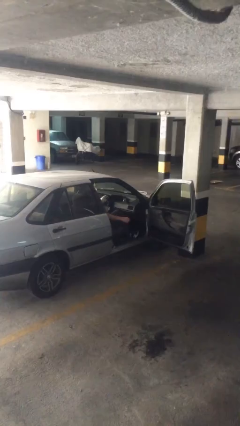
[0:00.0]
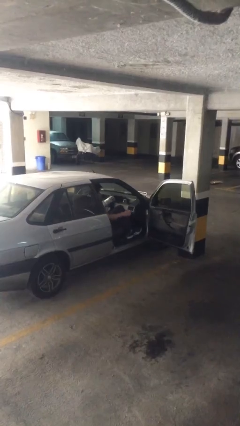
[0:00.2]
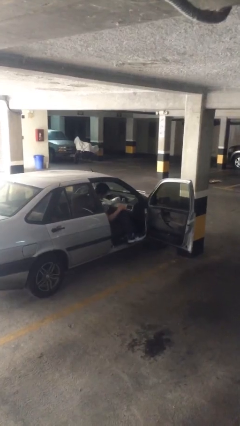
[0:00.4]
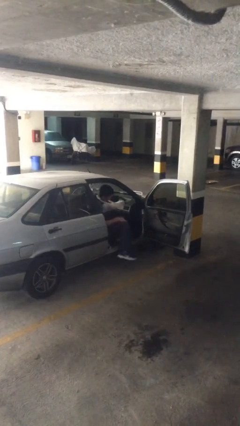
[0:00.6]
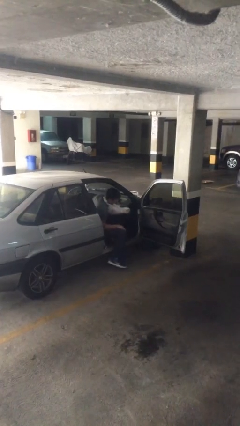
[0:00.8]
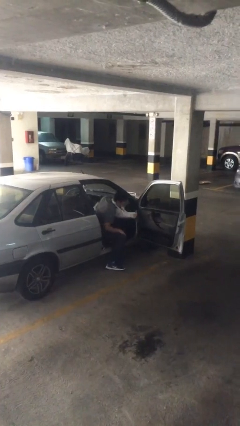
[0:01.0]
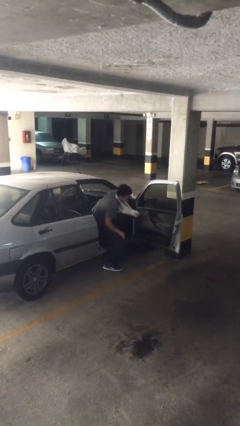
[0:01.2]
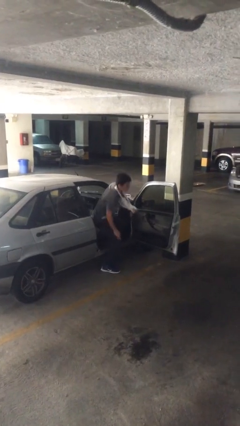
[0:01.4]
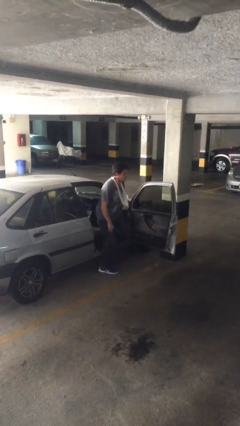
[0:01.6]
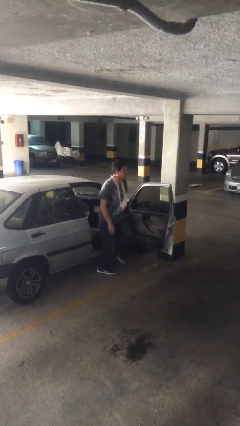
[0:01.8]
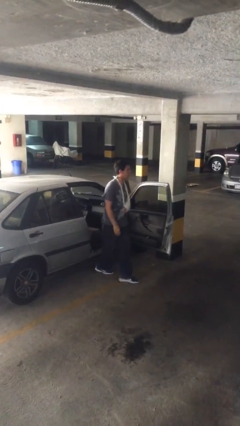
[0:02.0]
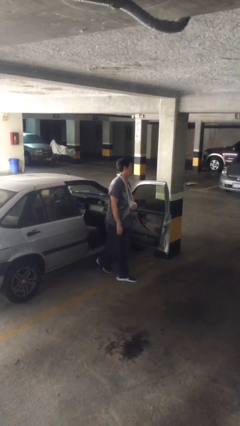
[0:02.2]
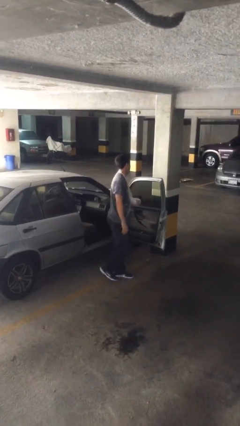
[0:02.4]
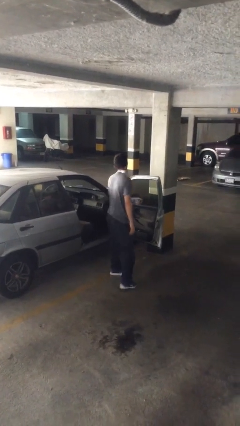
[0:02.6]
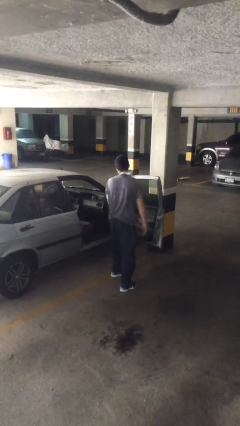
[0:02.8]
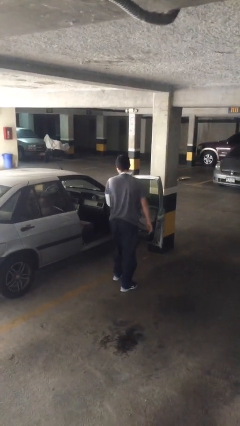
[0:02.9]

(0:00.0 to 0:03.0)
person exits car

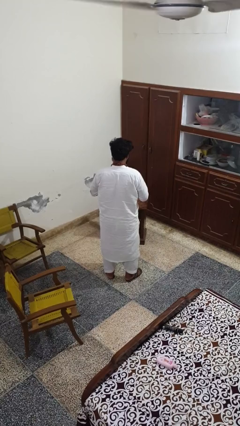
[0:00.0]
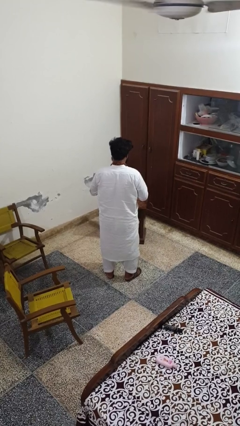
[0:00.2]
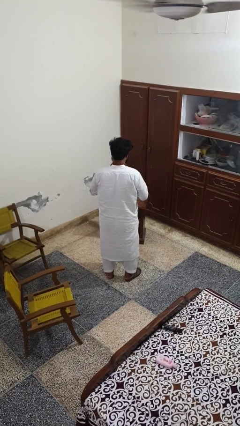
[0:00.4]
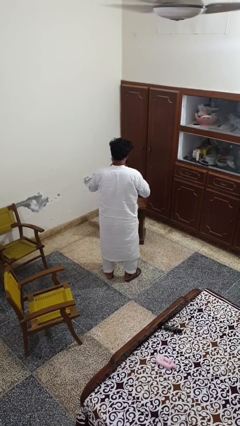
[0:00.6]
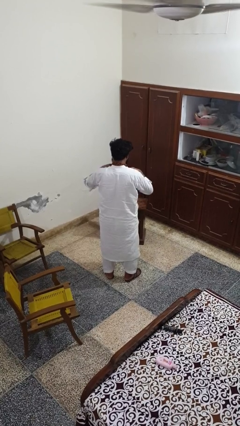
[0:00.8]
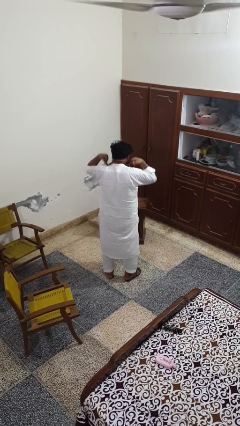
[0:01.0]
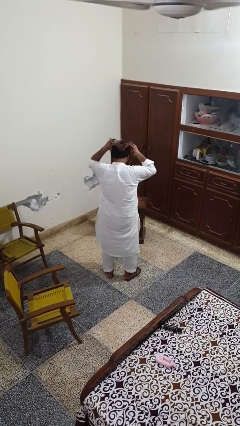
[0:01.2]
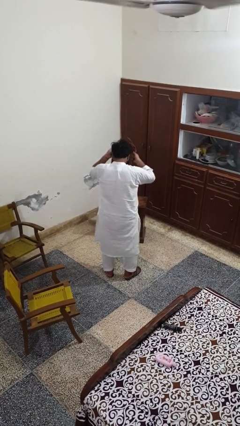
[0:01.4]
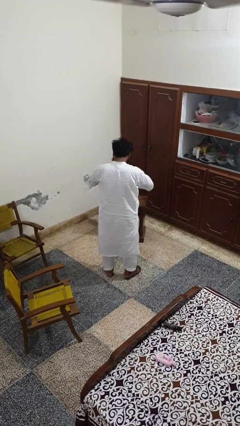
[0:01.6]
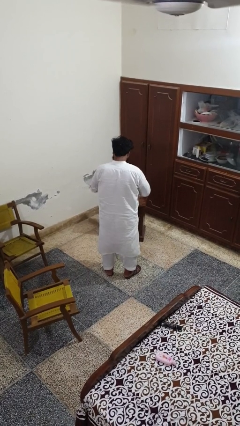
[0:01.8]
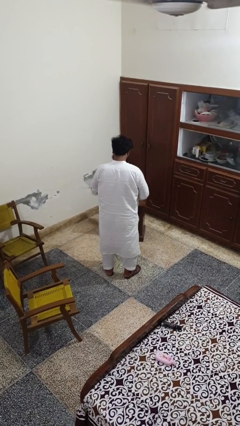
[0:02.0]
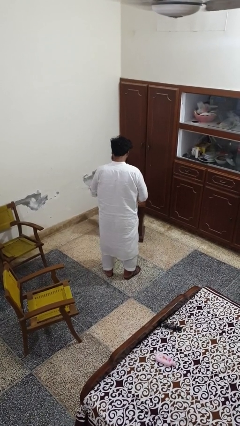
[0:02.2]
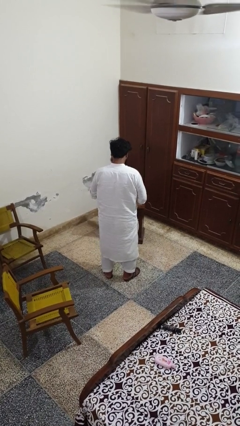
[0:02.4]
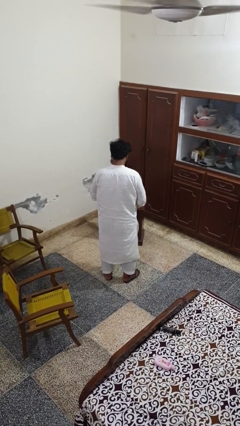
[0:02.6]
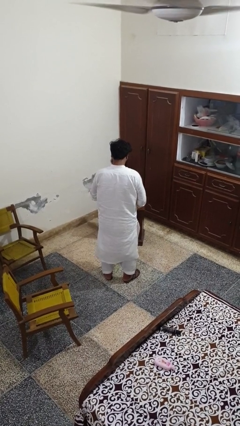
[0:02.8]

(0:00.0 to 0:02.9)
person takes off necklace

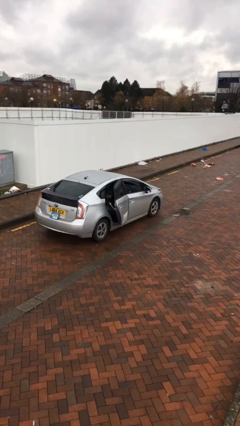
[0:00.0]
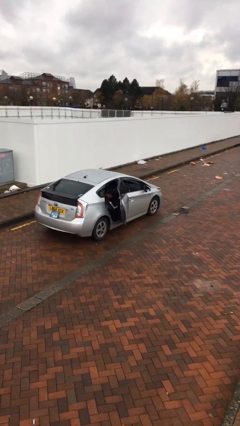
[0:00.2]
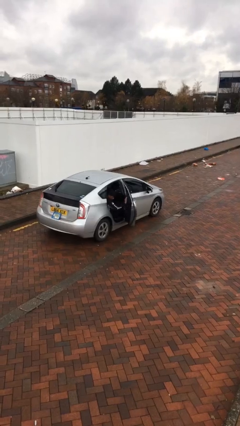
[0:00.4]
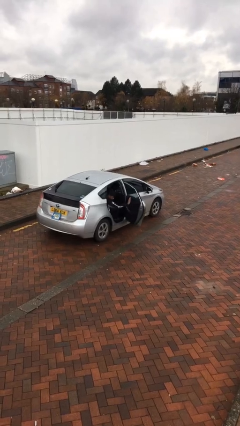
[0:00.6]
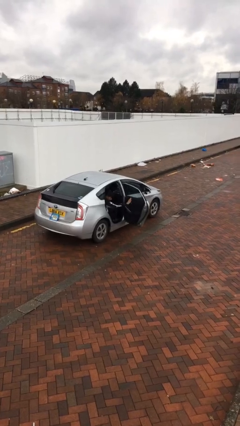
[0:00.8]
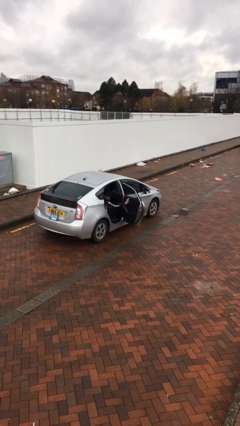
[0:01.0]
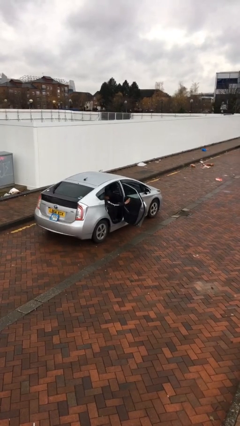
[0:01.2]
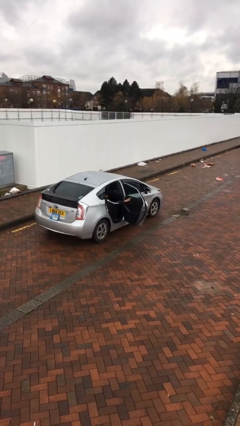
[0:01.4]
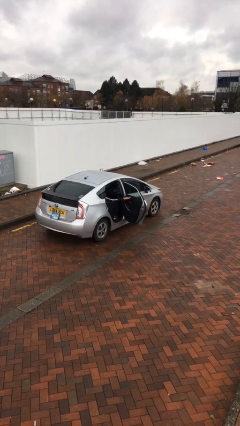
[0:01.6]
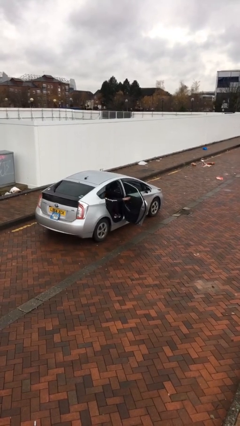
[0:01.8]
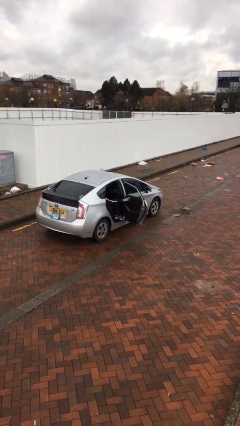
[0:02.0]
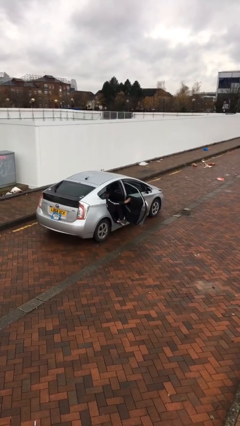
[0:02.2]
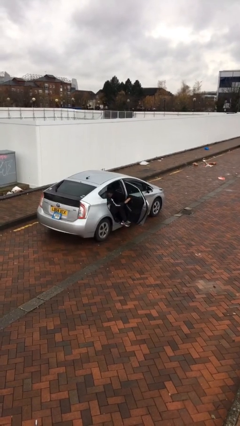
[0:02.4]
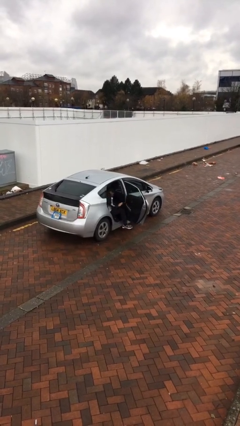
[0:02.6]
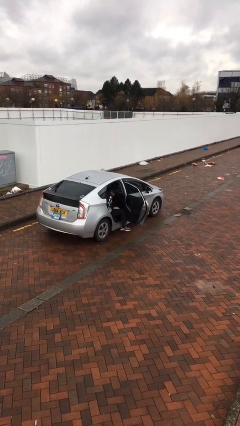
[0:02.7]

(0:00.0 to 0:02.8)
person opens car door

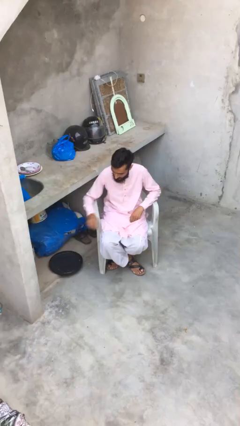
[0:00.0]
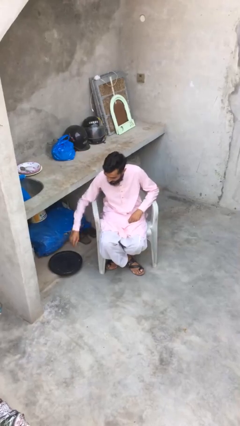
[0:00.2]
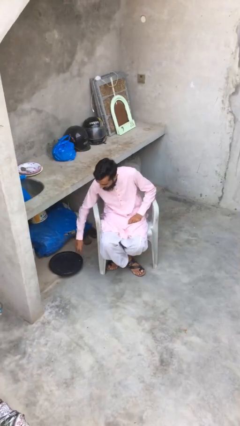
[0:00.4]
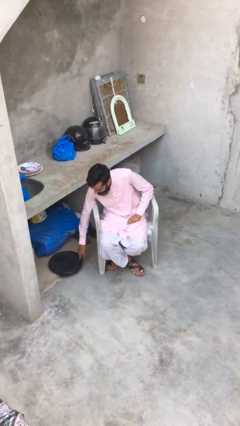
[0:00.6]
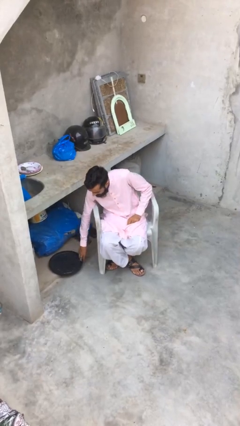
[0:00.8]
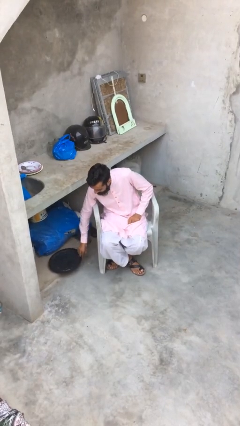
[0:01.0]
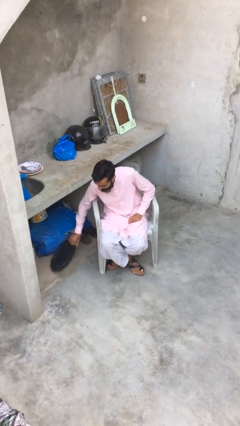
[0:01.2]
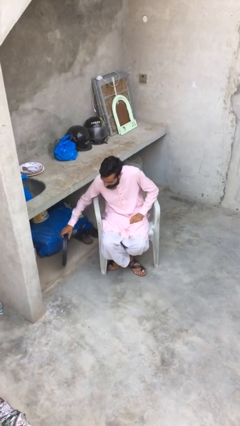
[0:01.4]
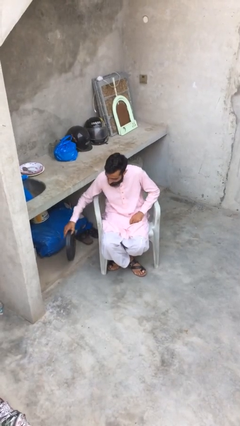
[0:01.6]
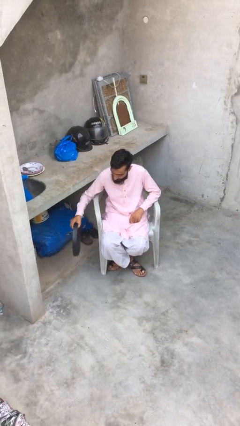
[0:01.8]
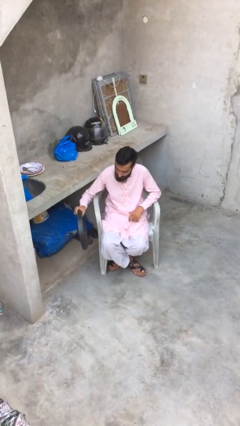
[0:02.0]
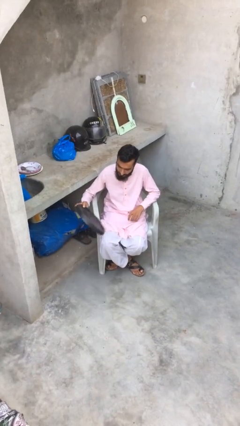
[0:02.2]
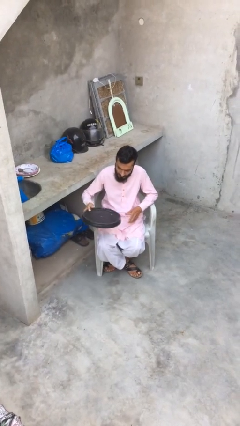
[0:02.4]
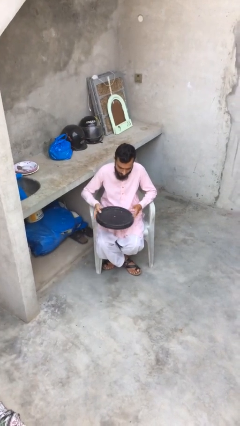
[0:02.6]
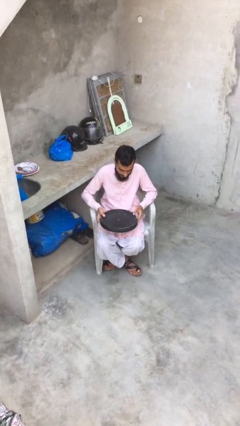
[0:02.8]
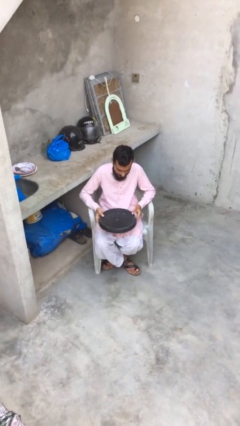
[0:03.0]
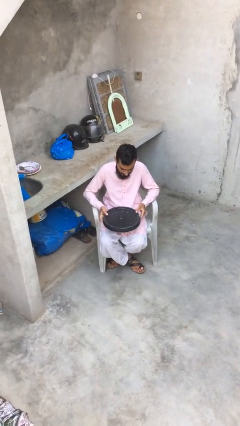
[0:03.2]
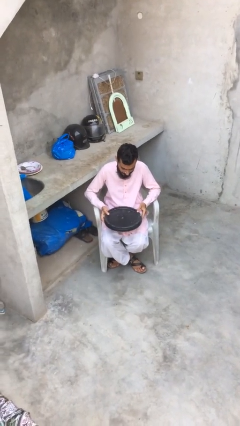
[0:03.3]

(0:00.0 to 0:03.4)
person picks up object from floor

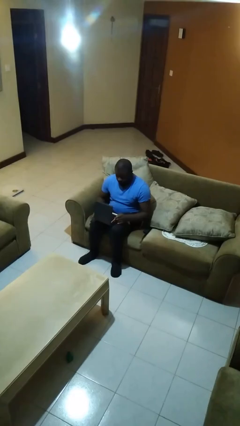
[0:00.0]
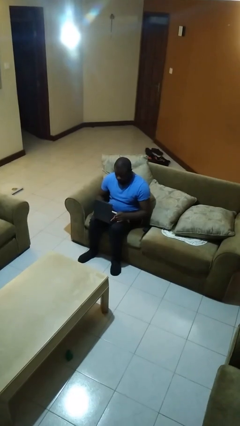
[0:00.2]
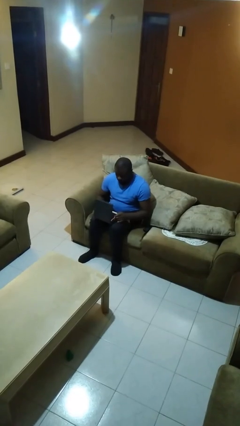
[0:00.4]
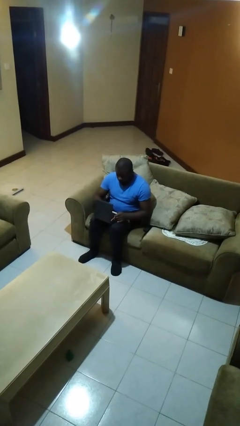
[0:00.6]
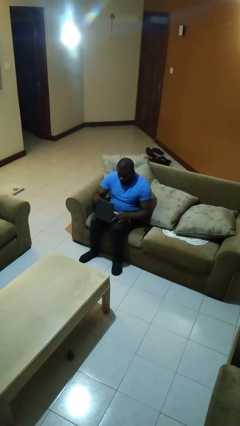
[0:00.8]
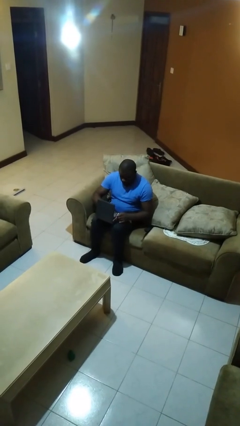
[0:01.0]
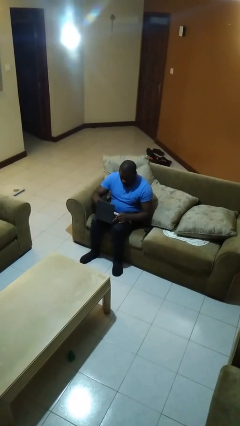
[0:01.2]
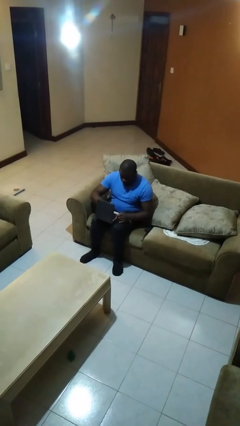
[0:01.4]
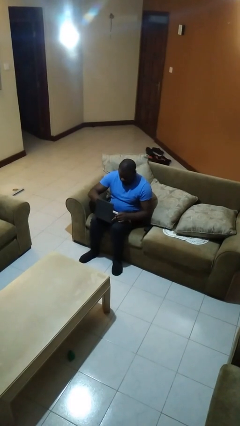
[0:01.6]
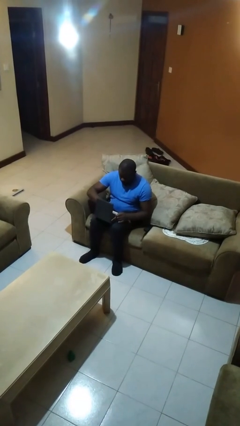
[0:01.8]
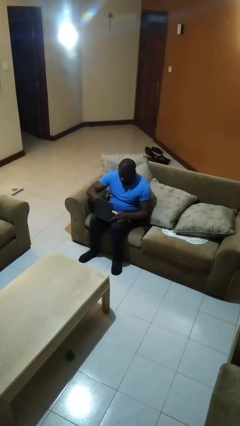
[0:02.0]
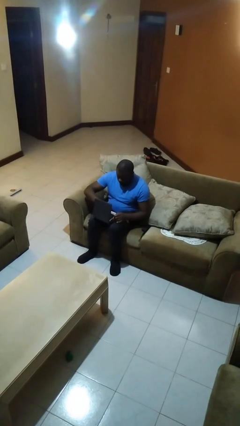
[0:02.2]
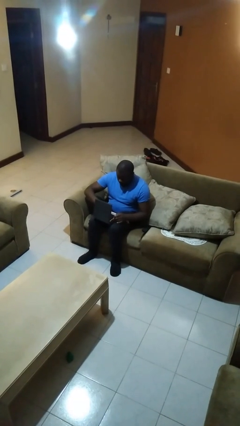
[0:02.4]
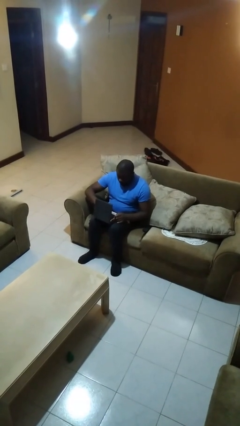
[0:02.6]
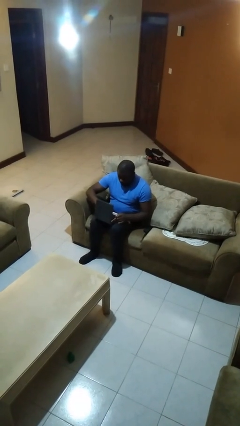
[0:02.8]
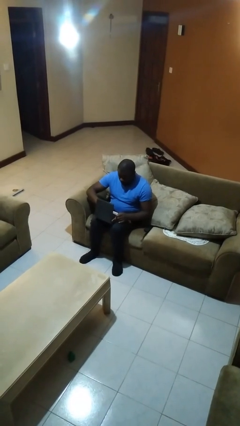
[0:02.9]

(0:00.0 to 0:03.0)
person searches jewelry box

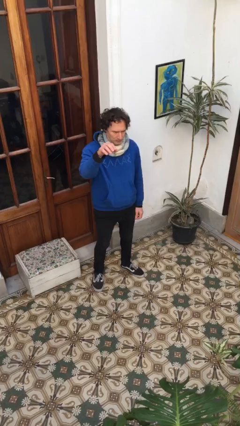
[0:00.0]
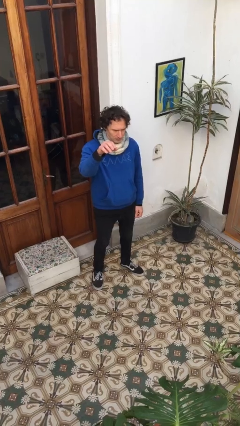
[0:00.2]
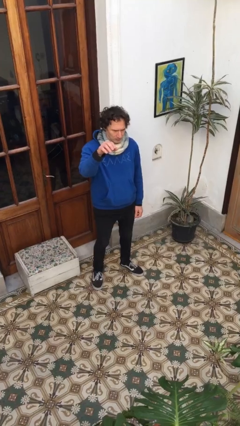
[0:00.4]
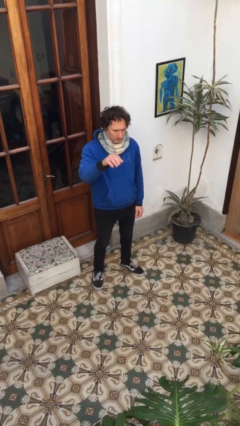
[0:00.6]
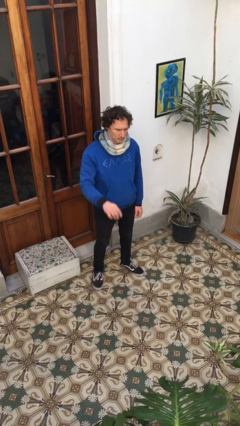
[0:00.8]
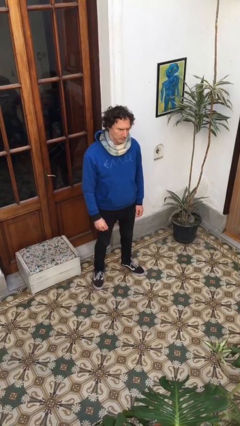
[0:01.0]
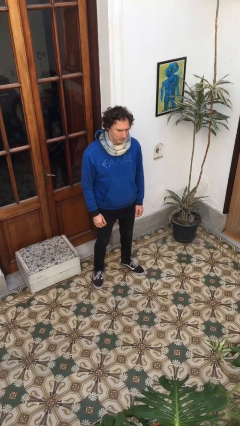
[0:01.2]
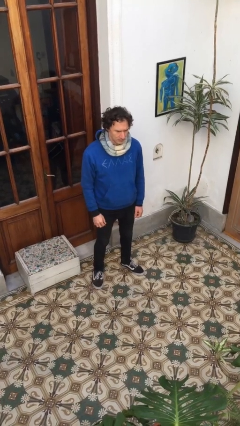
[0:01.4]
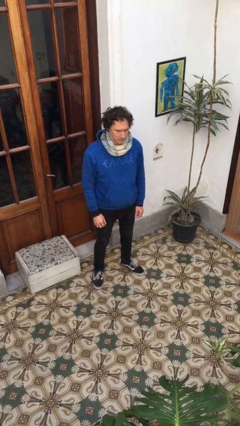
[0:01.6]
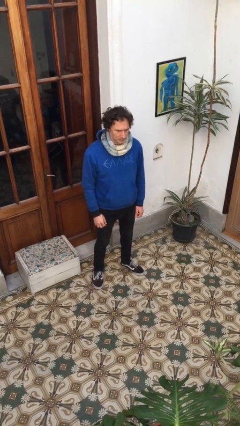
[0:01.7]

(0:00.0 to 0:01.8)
person gestures swipe down

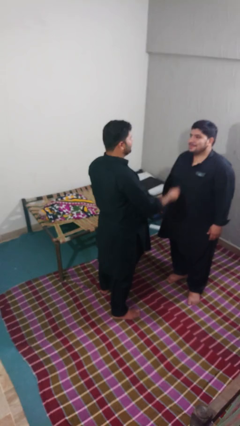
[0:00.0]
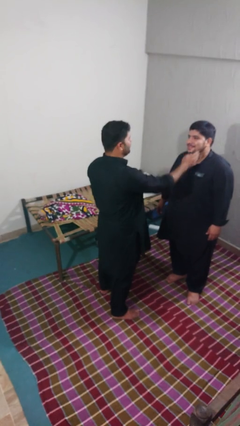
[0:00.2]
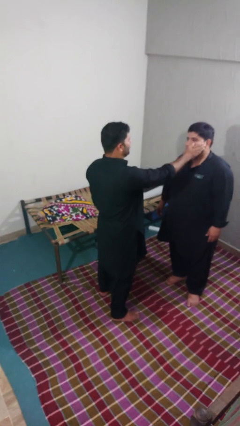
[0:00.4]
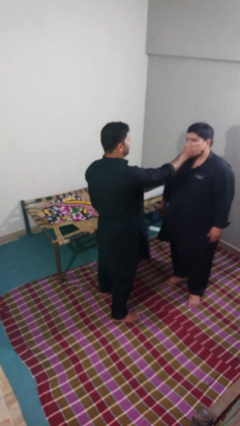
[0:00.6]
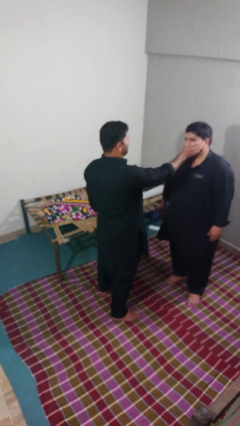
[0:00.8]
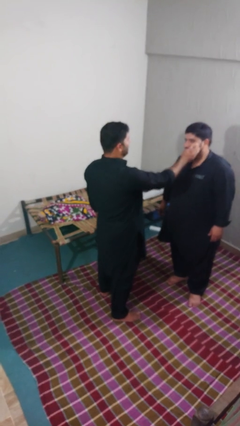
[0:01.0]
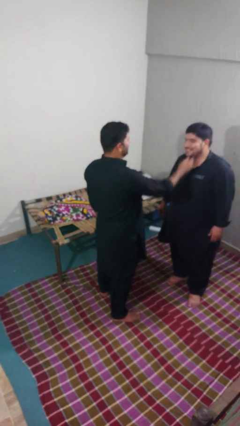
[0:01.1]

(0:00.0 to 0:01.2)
person touches face of person
